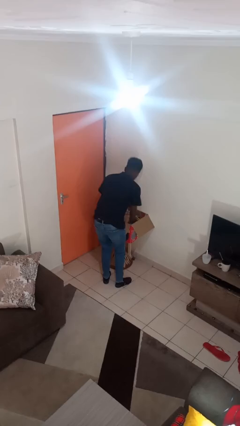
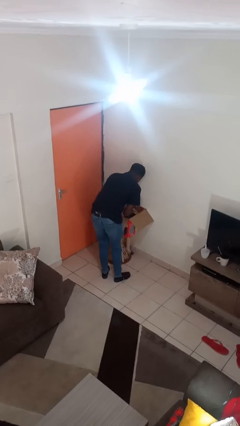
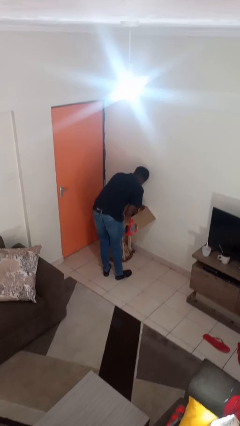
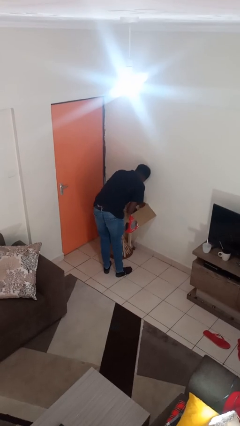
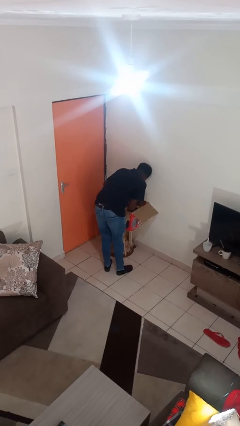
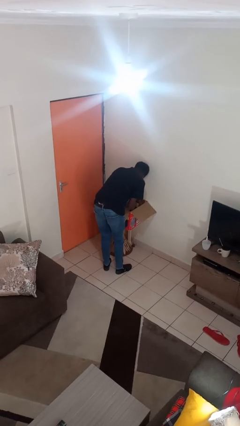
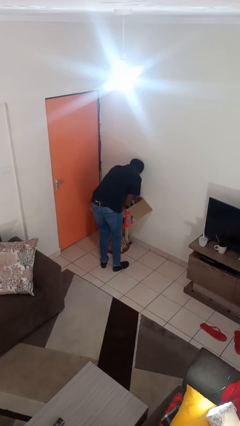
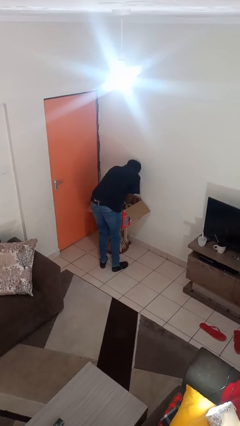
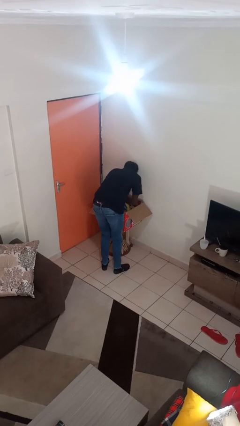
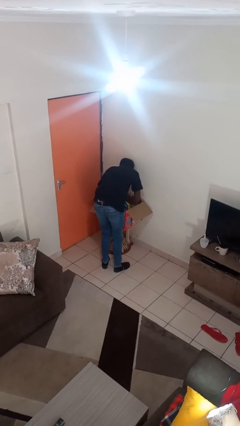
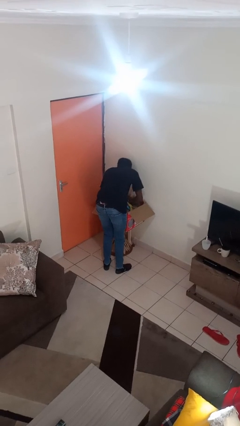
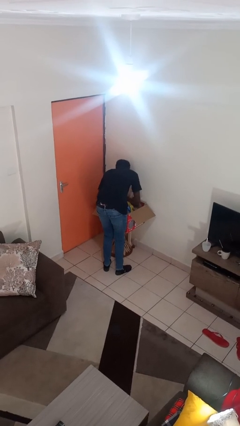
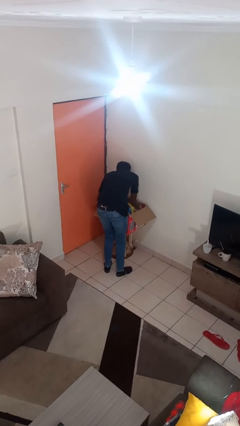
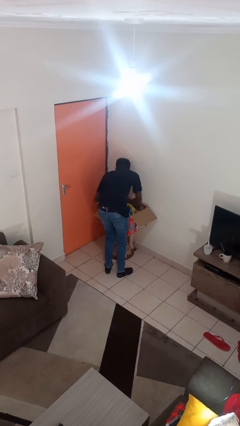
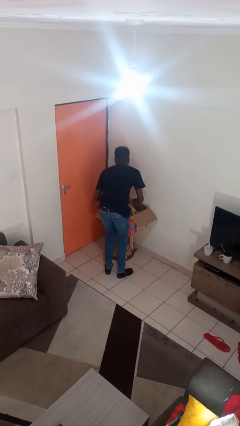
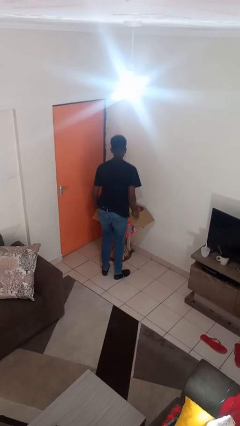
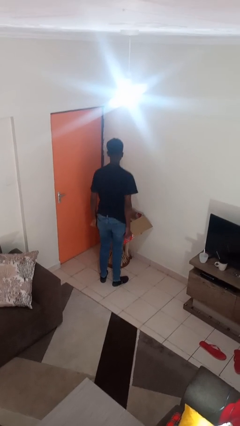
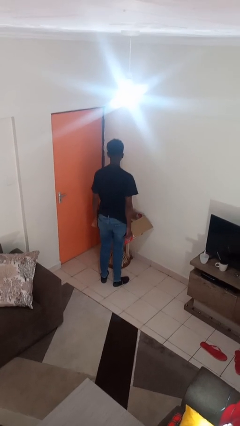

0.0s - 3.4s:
person searches in box

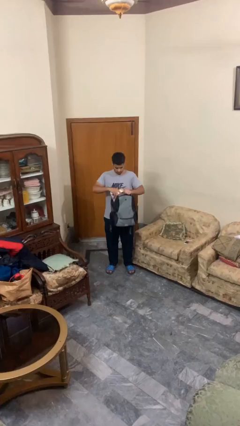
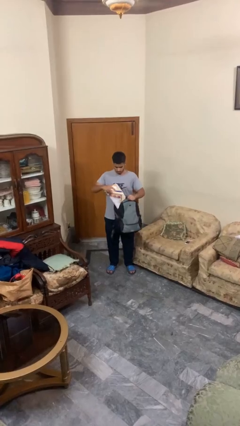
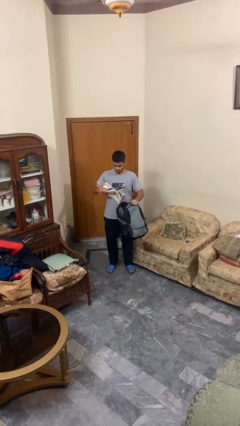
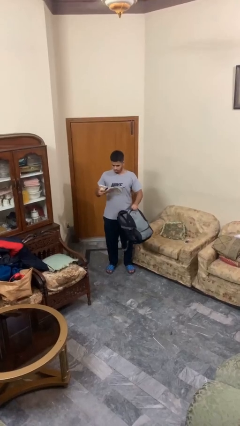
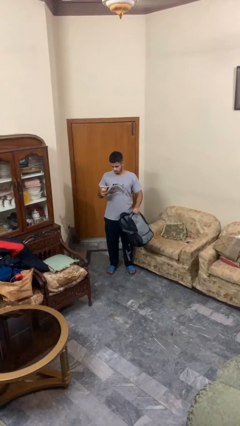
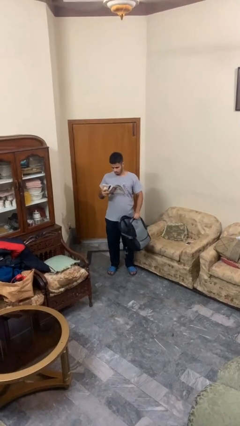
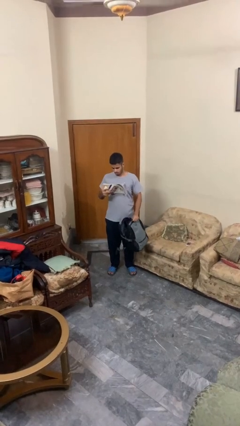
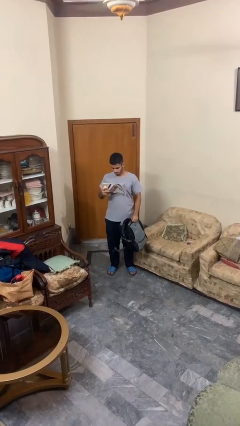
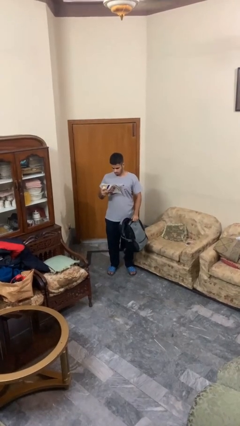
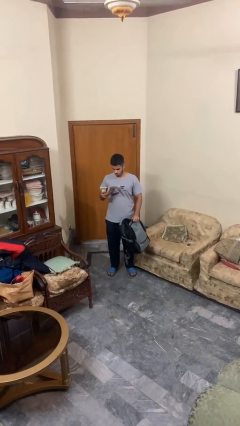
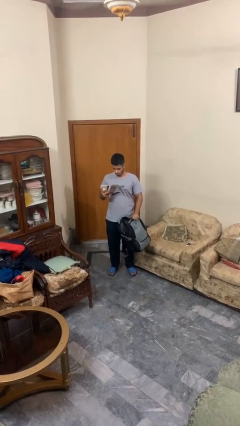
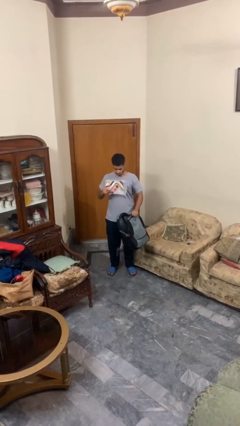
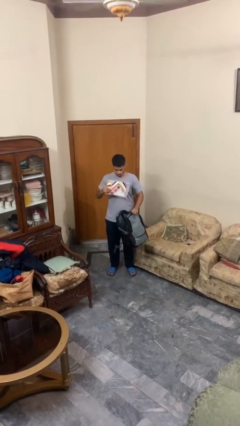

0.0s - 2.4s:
person takes object from backpack

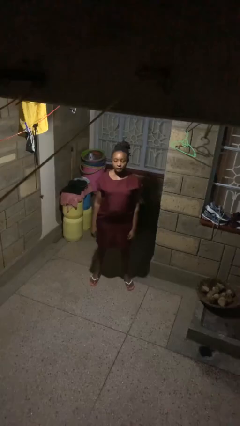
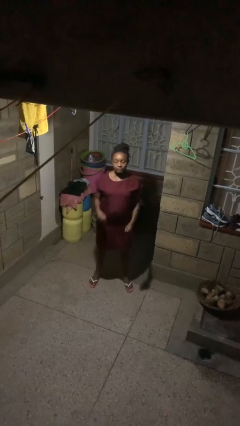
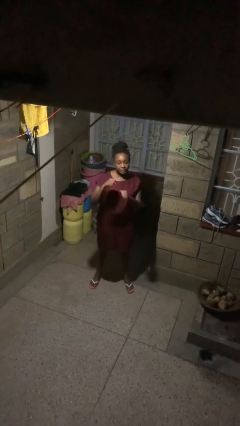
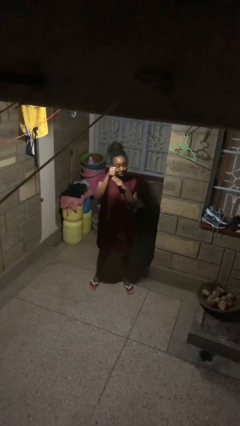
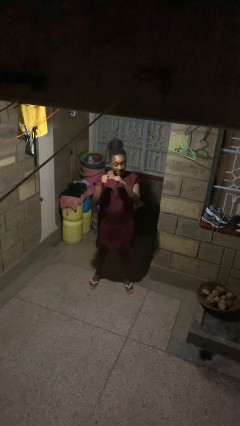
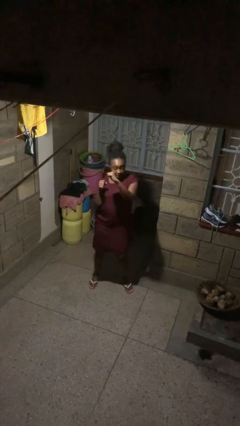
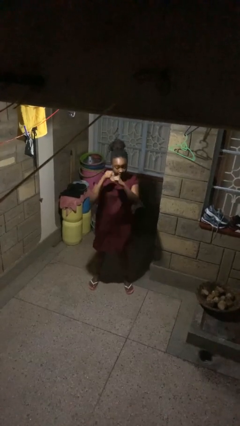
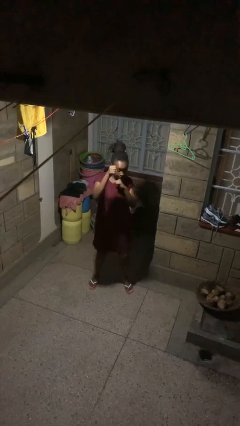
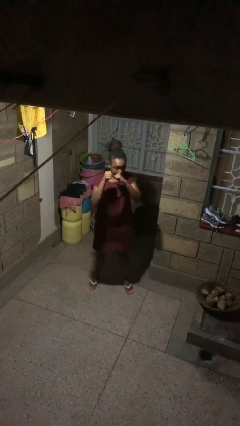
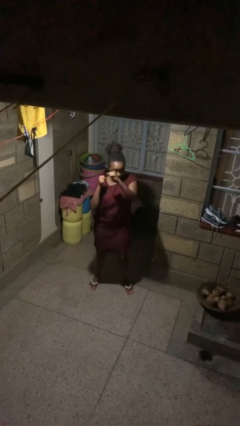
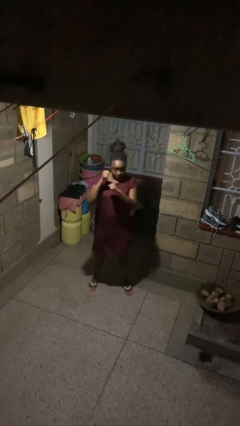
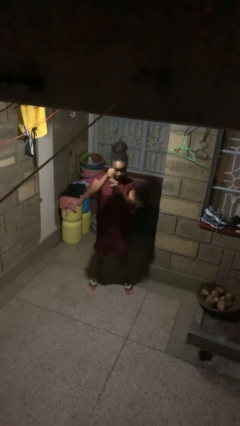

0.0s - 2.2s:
person punches

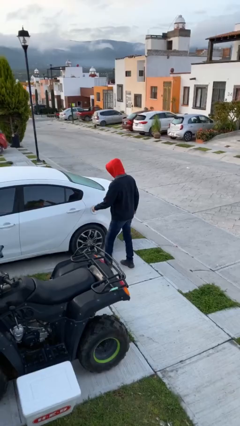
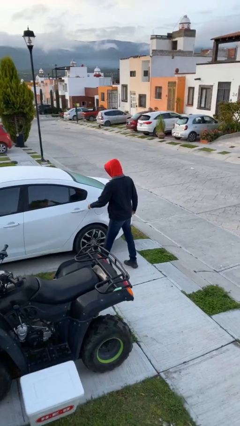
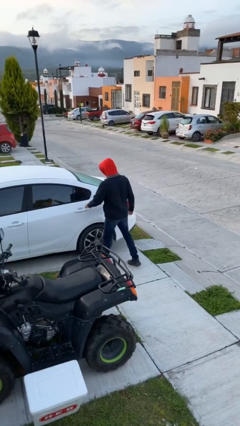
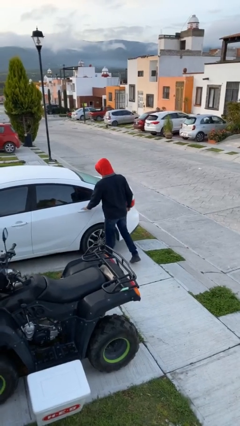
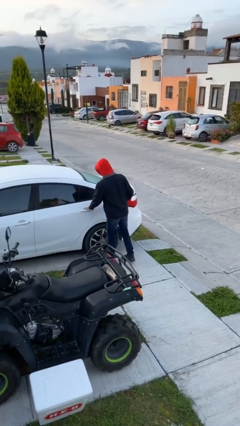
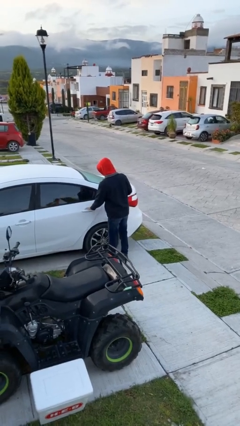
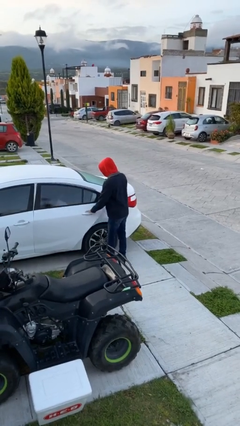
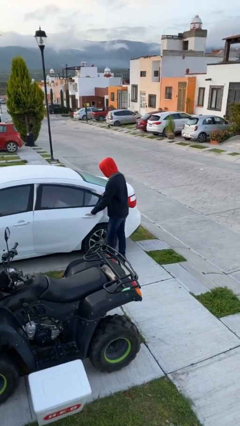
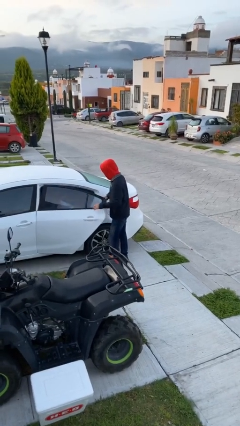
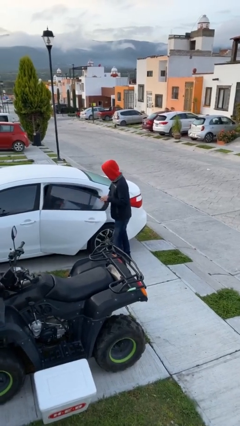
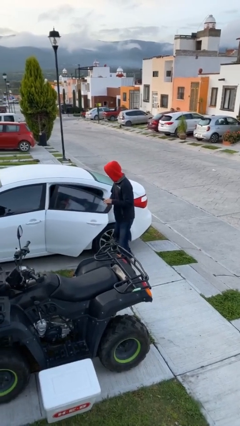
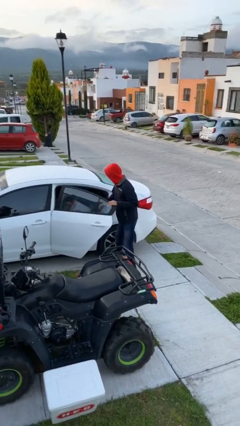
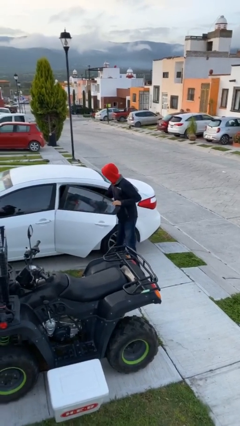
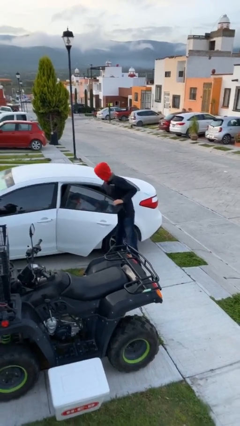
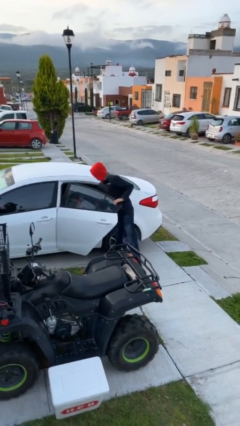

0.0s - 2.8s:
person opens car door

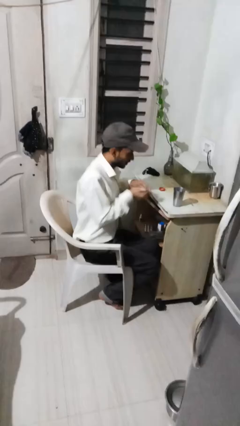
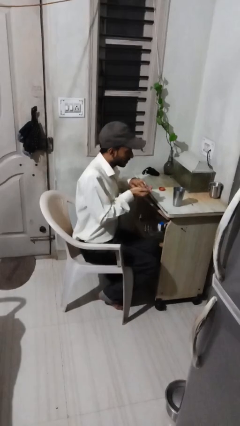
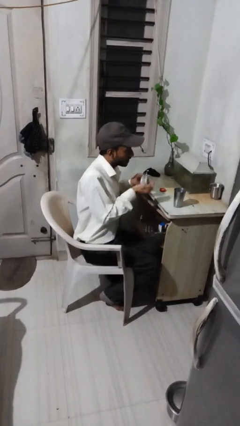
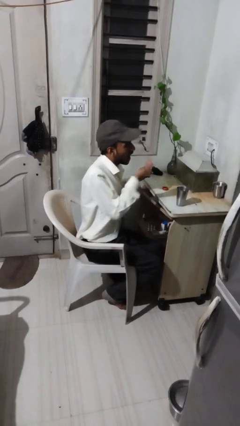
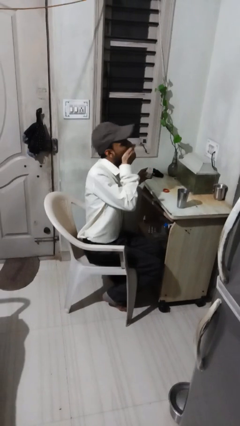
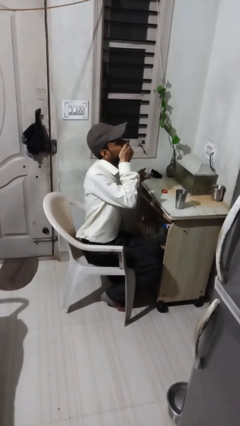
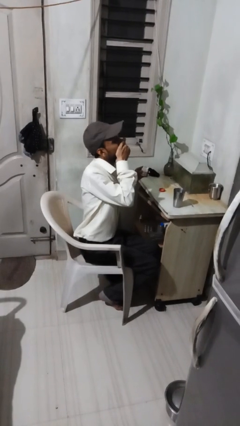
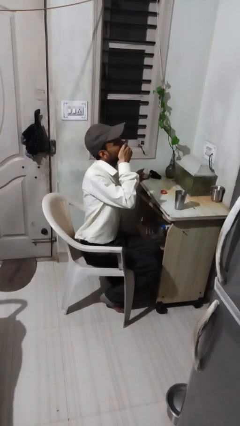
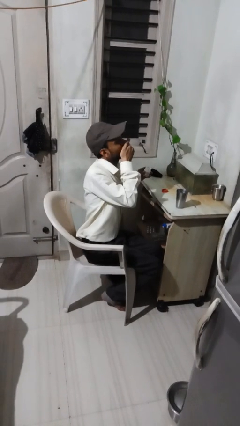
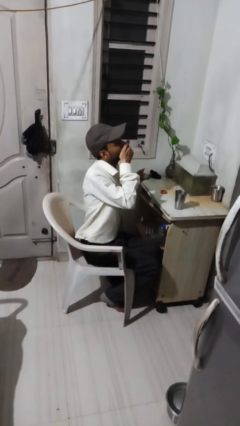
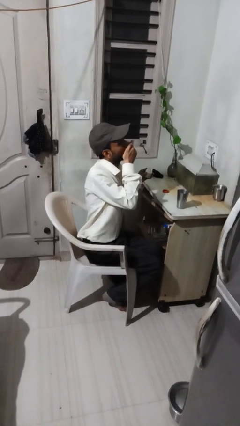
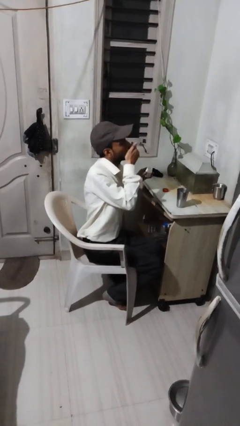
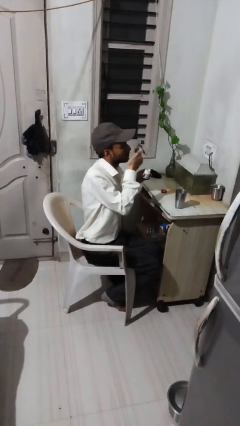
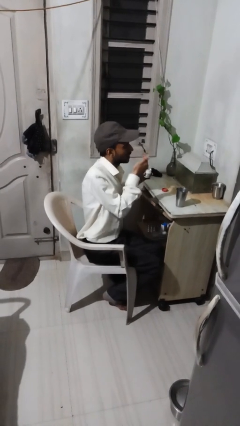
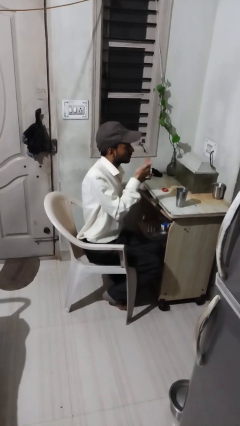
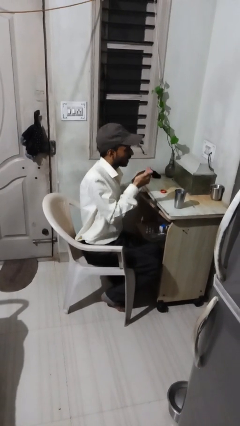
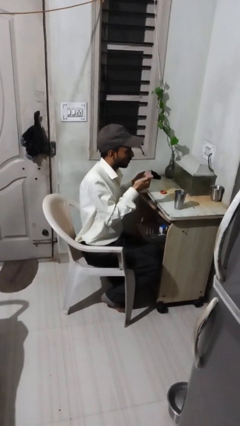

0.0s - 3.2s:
person takes medicine pills

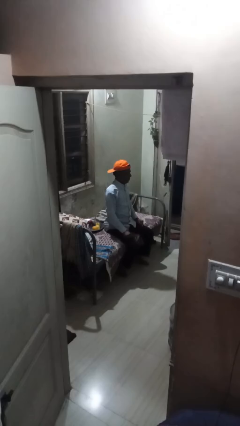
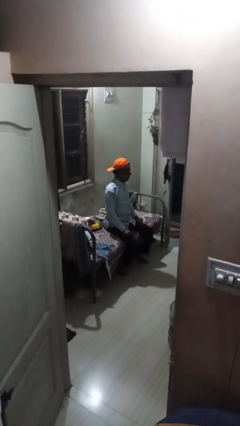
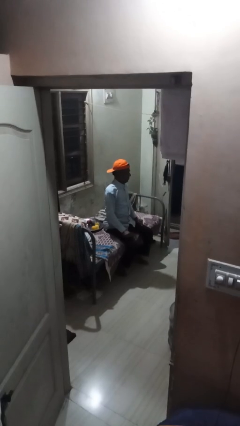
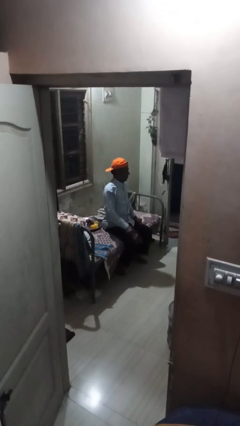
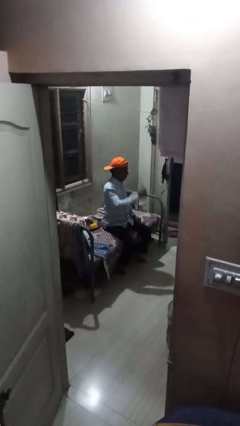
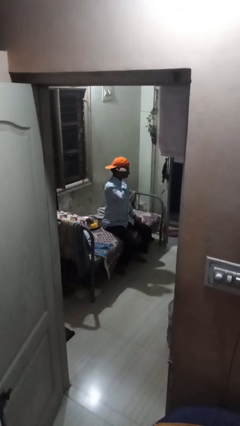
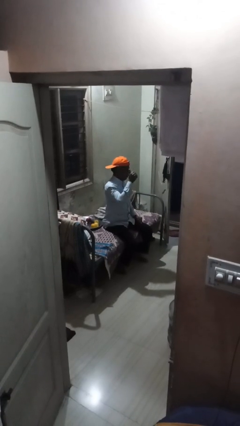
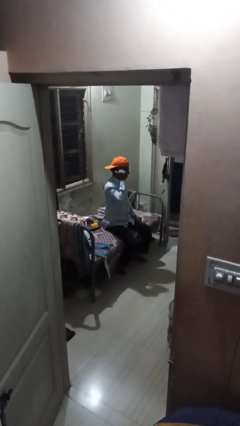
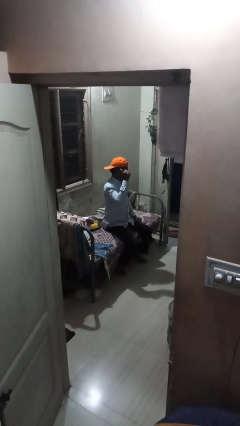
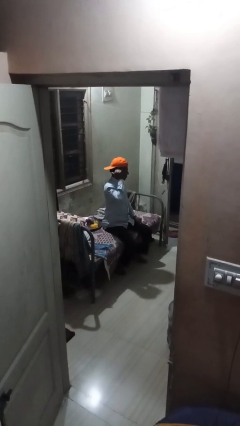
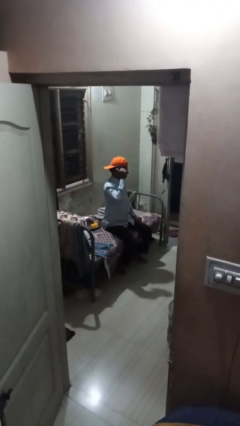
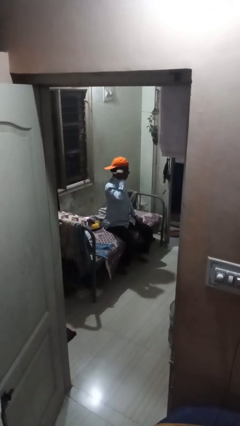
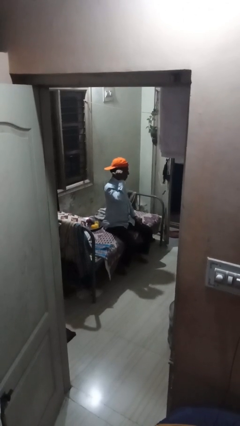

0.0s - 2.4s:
person gestures behind me

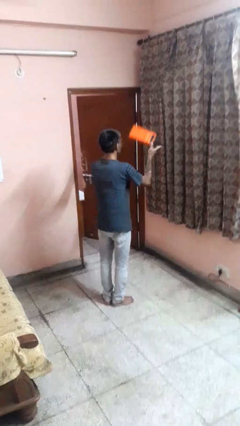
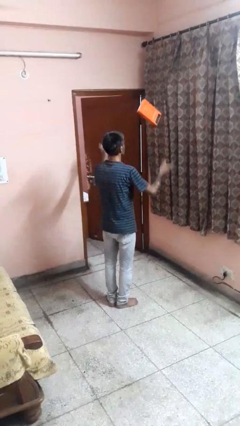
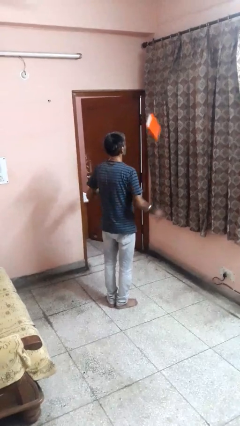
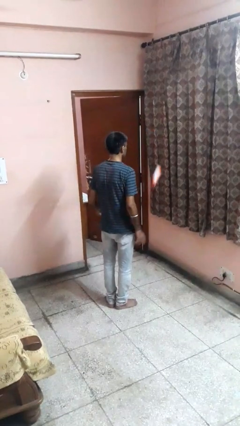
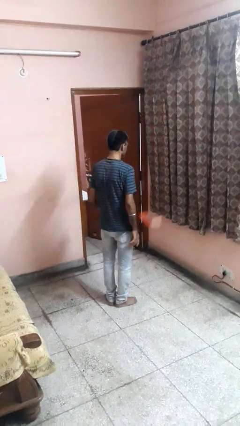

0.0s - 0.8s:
person throws object into air
